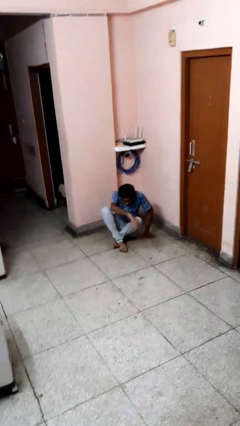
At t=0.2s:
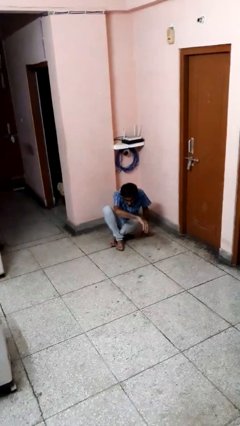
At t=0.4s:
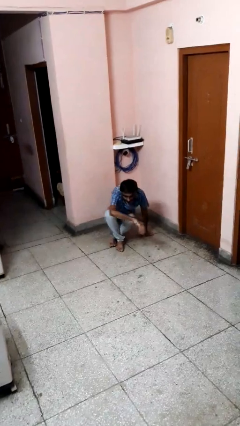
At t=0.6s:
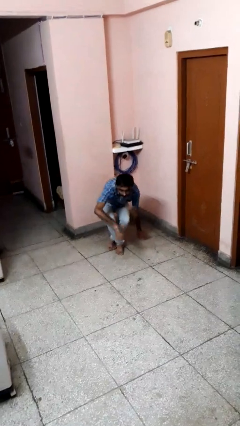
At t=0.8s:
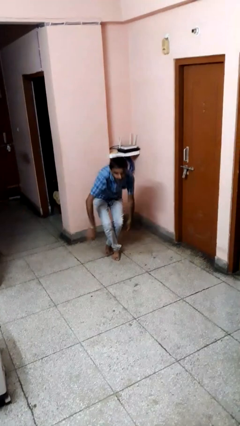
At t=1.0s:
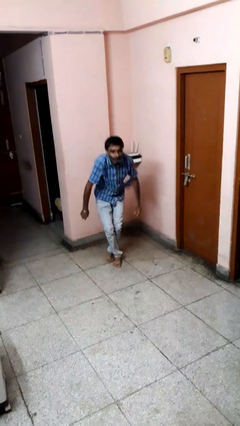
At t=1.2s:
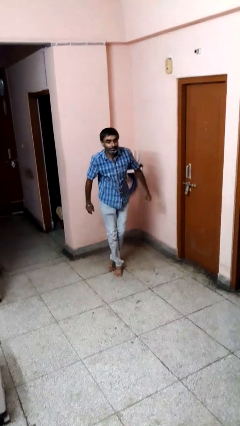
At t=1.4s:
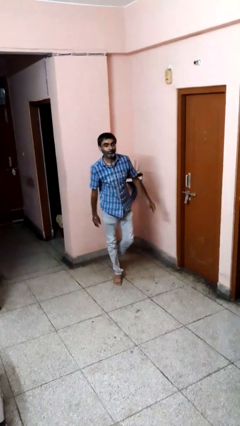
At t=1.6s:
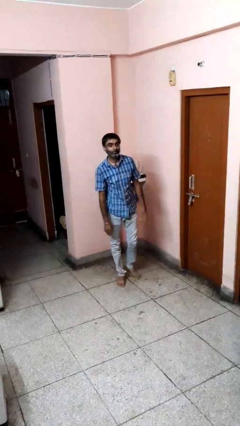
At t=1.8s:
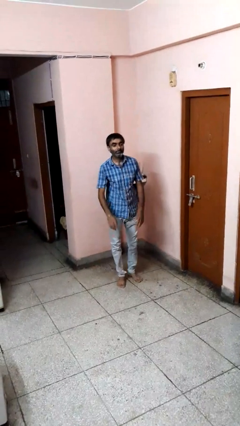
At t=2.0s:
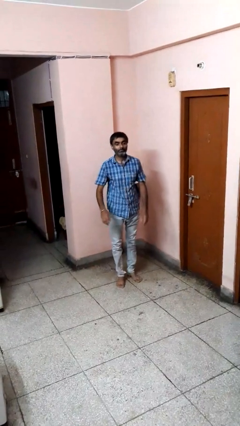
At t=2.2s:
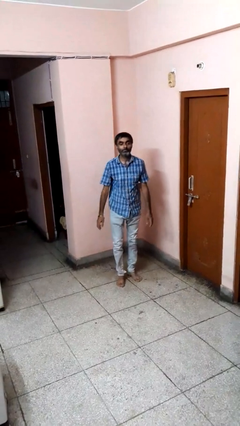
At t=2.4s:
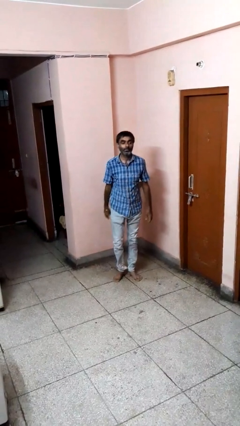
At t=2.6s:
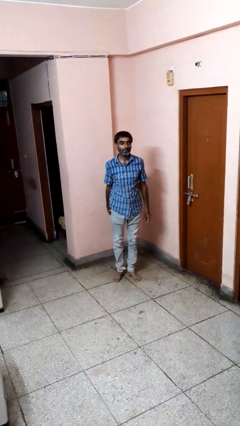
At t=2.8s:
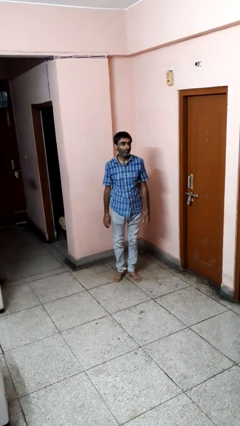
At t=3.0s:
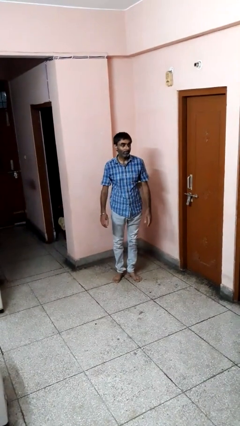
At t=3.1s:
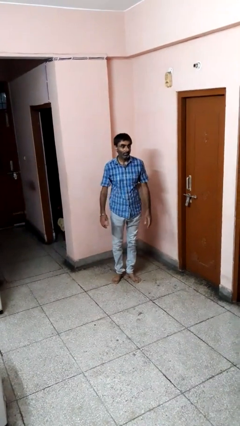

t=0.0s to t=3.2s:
person stands up from floor

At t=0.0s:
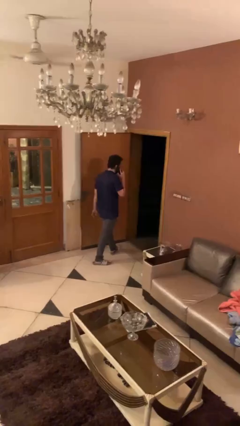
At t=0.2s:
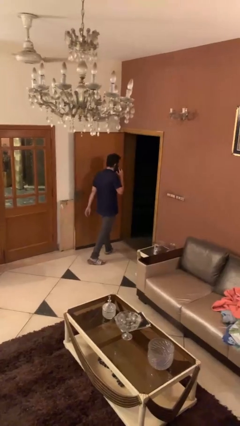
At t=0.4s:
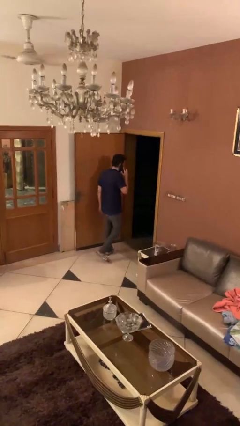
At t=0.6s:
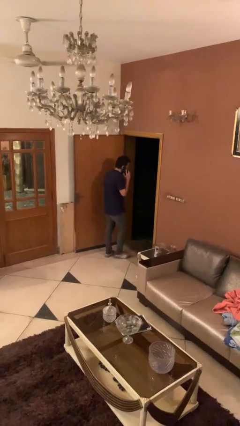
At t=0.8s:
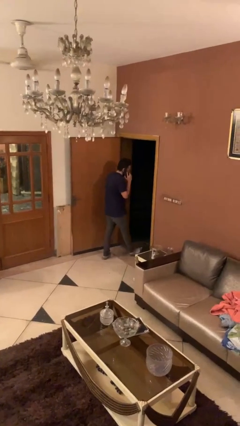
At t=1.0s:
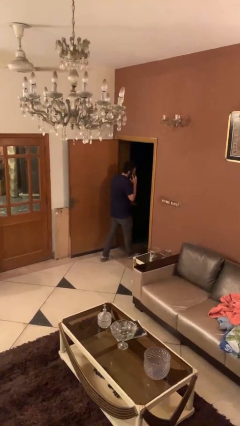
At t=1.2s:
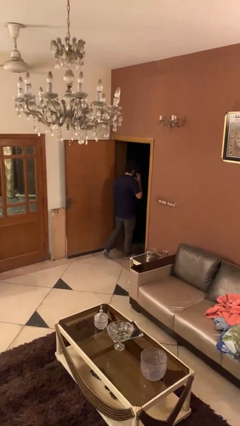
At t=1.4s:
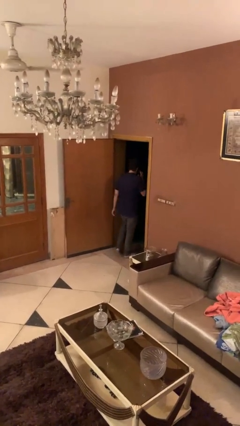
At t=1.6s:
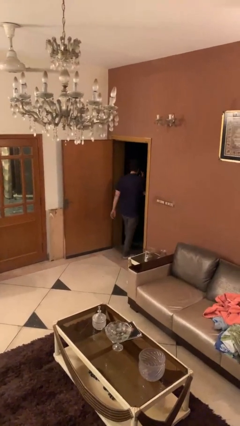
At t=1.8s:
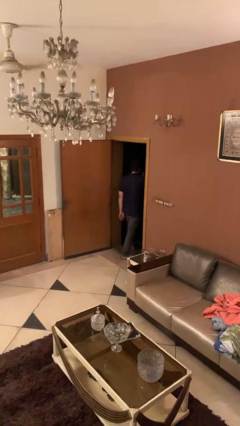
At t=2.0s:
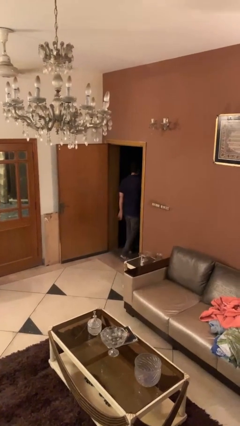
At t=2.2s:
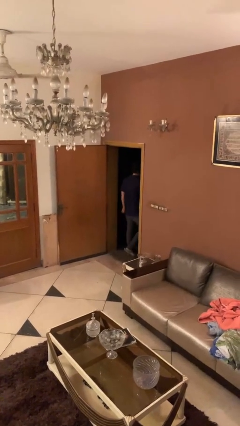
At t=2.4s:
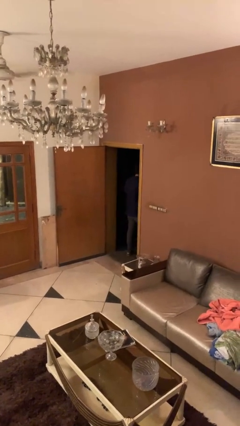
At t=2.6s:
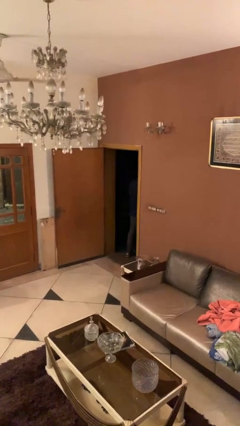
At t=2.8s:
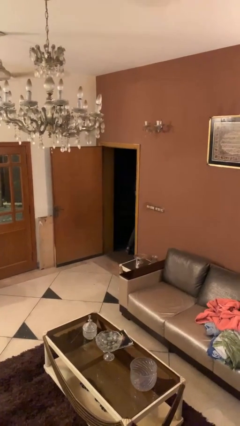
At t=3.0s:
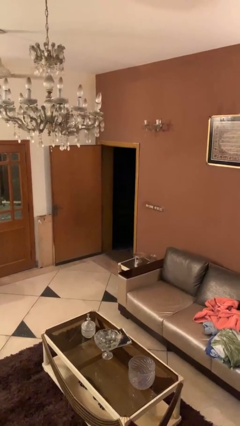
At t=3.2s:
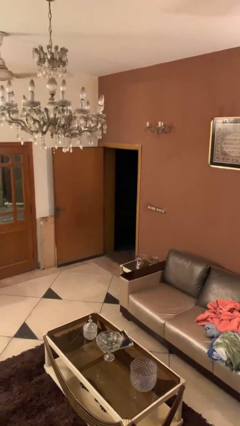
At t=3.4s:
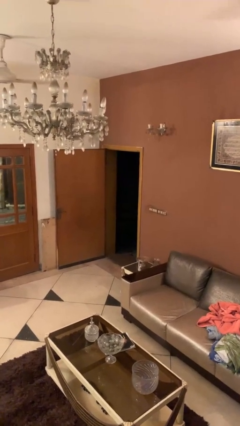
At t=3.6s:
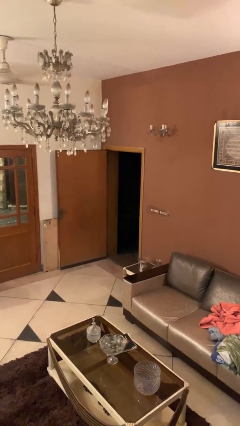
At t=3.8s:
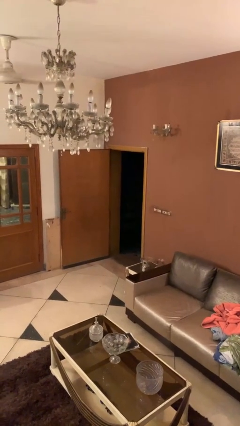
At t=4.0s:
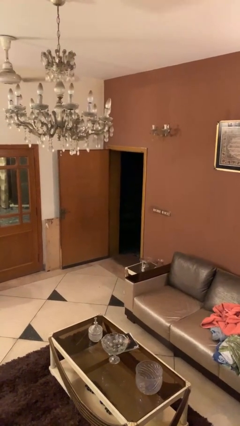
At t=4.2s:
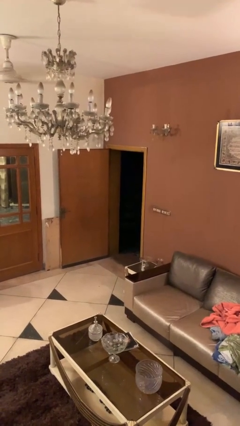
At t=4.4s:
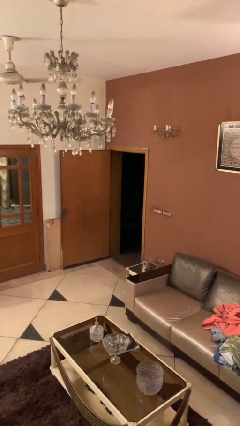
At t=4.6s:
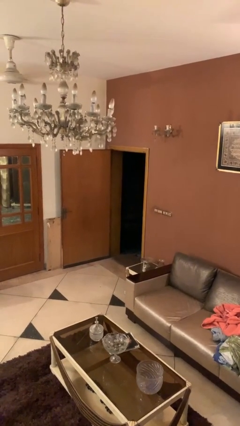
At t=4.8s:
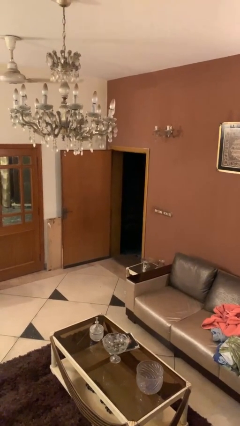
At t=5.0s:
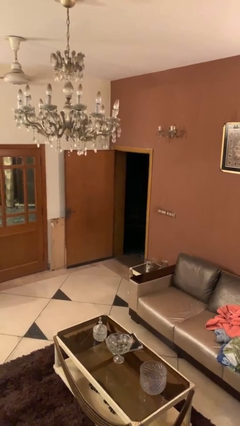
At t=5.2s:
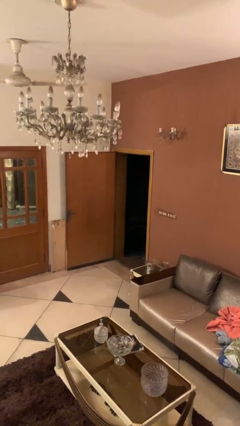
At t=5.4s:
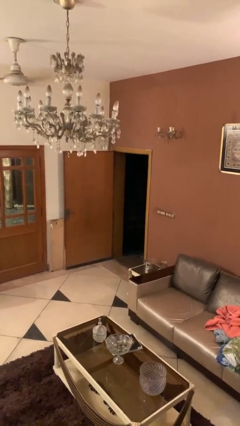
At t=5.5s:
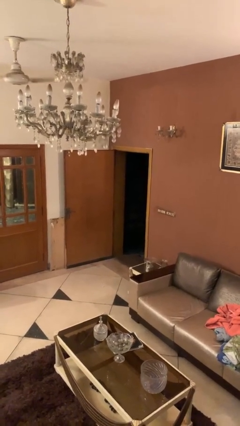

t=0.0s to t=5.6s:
person exits scene through structure

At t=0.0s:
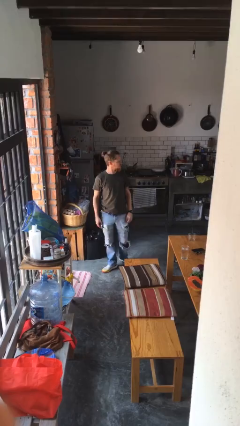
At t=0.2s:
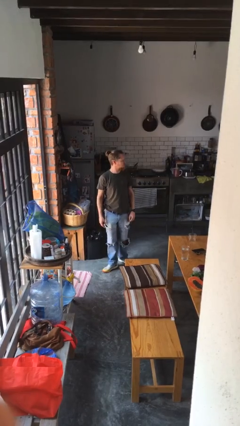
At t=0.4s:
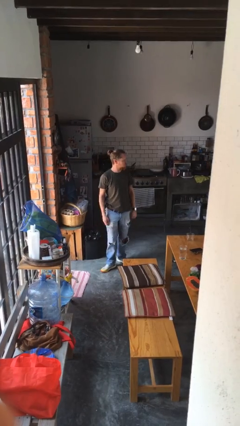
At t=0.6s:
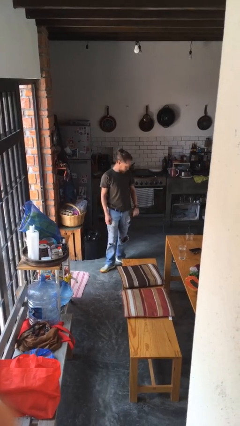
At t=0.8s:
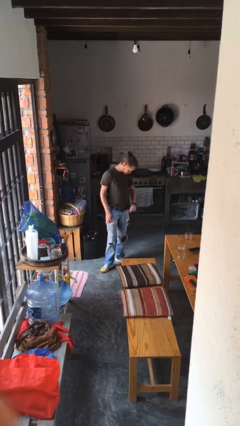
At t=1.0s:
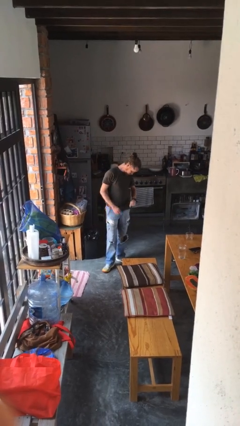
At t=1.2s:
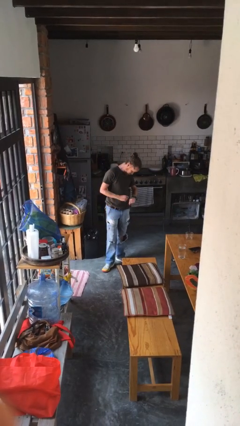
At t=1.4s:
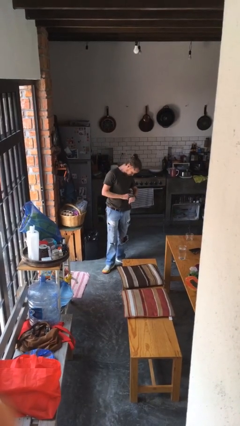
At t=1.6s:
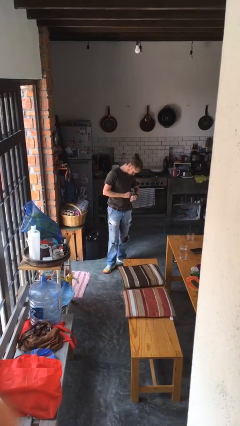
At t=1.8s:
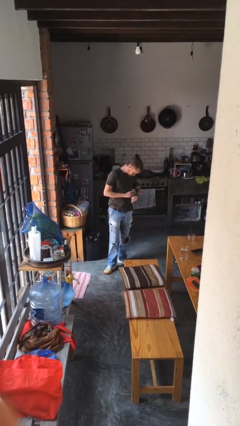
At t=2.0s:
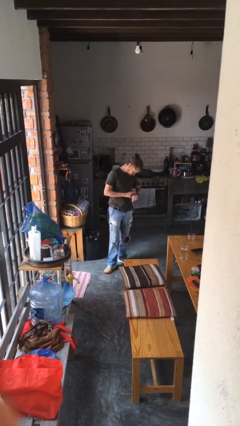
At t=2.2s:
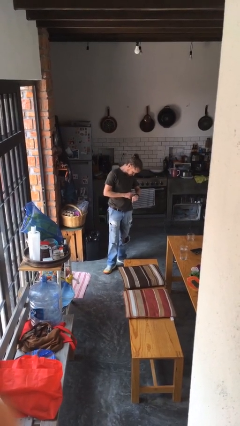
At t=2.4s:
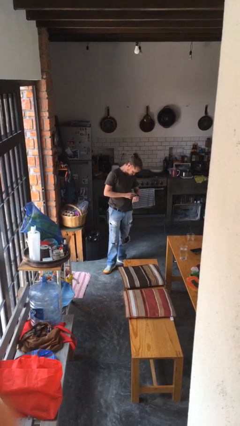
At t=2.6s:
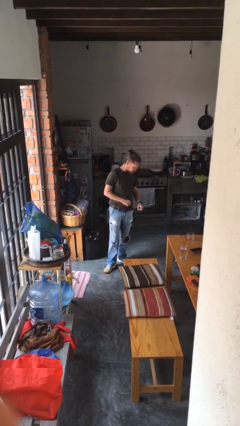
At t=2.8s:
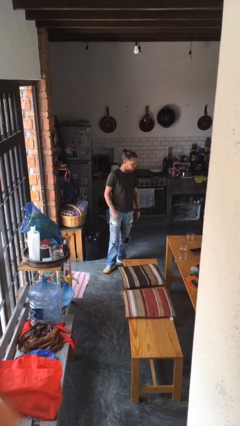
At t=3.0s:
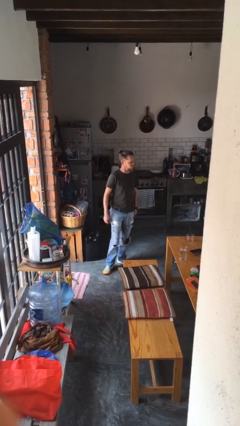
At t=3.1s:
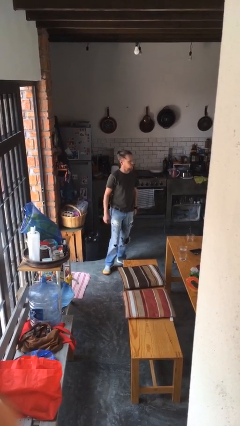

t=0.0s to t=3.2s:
person looks at wristwatch

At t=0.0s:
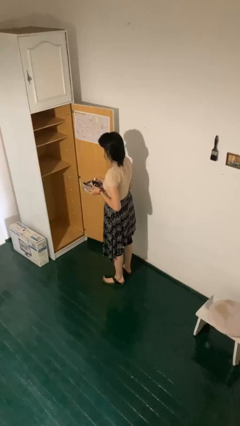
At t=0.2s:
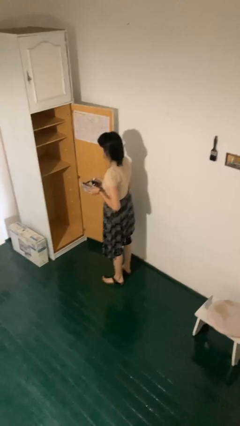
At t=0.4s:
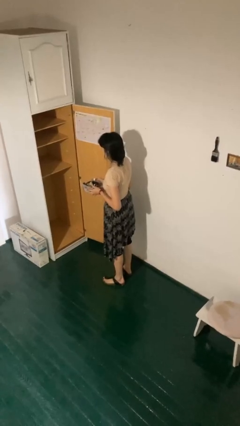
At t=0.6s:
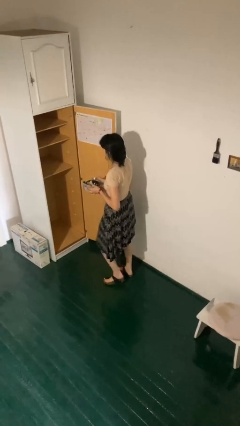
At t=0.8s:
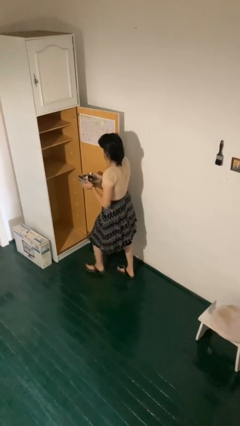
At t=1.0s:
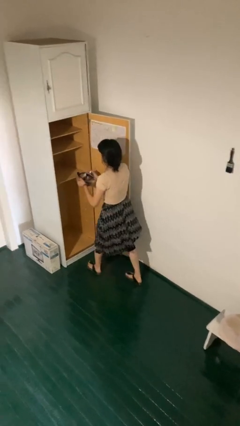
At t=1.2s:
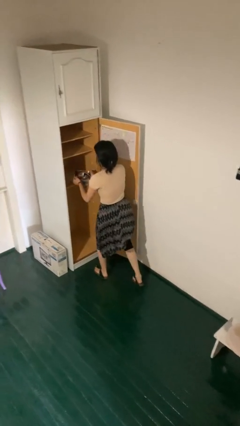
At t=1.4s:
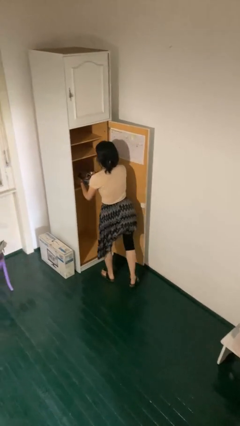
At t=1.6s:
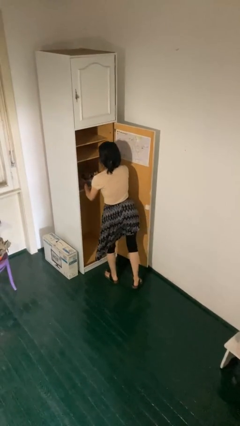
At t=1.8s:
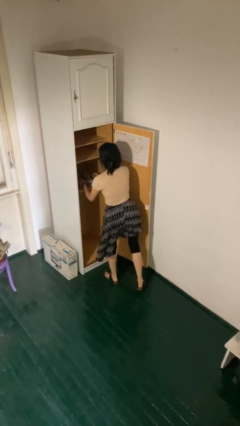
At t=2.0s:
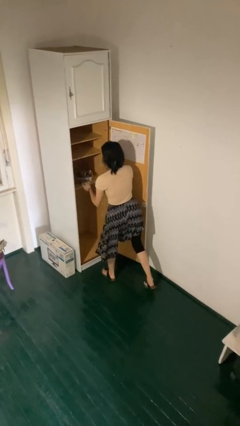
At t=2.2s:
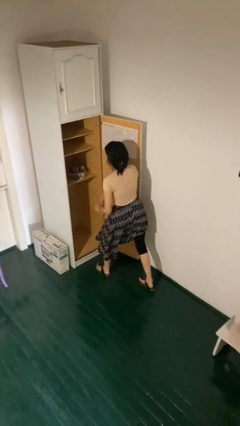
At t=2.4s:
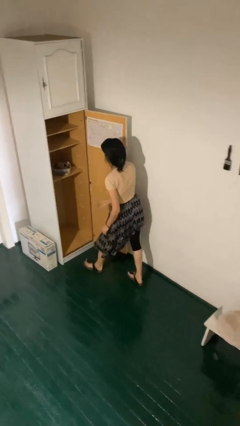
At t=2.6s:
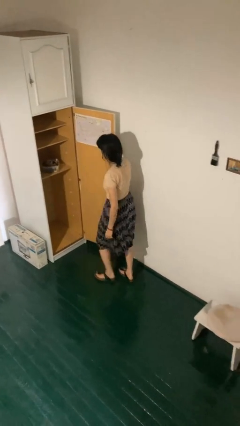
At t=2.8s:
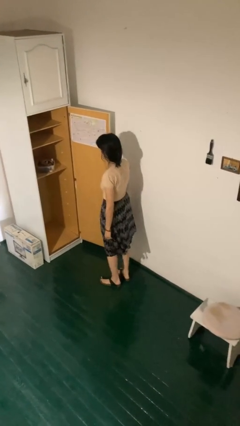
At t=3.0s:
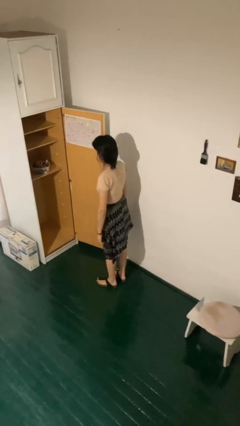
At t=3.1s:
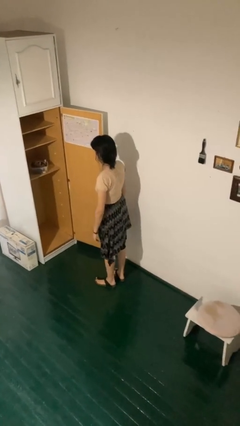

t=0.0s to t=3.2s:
person puts down object into cabinet

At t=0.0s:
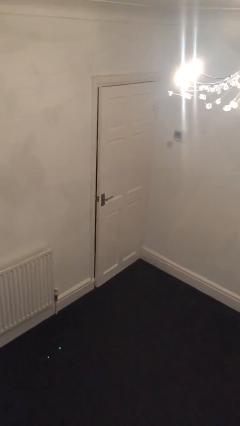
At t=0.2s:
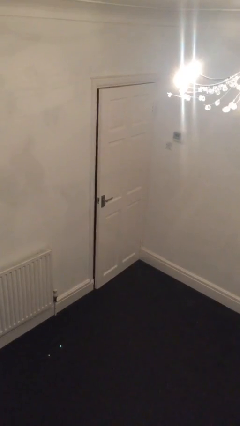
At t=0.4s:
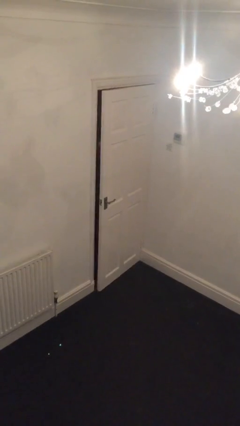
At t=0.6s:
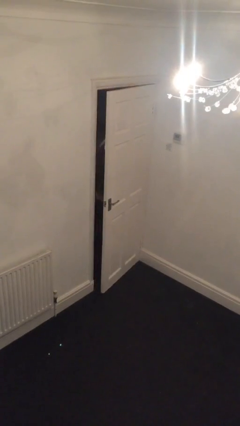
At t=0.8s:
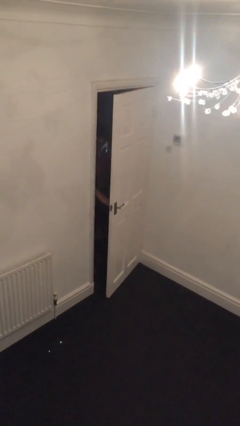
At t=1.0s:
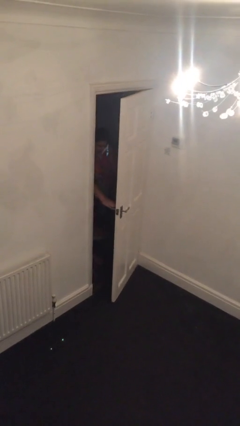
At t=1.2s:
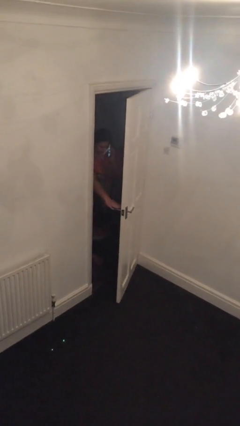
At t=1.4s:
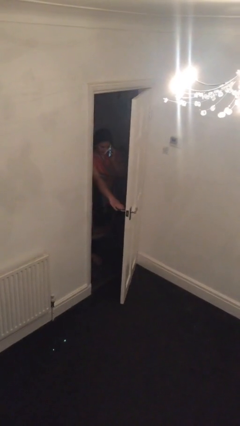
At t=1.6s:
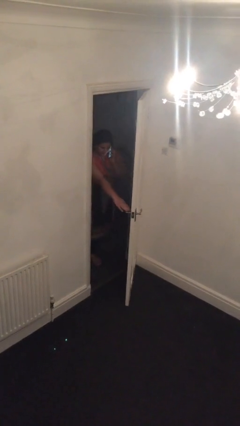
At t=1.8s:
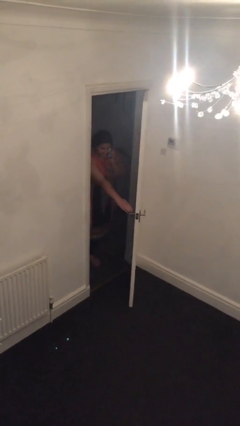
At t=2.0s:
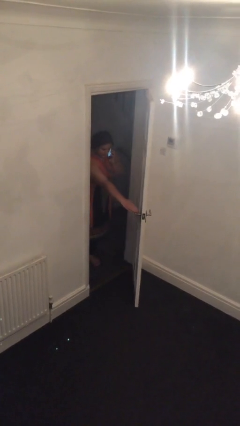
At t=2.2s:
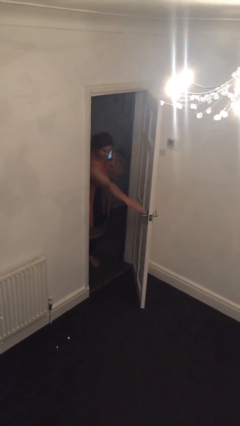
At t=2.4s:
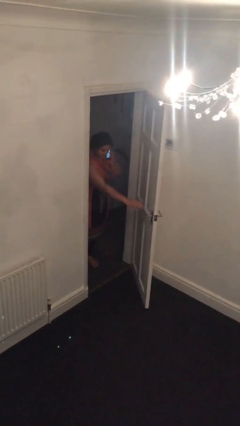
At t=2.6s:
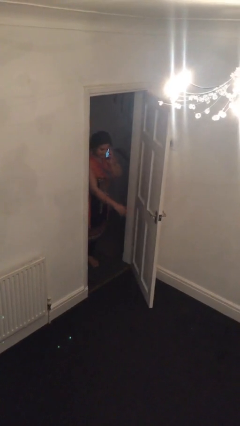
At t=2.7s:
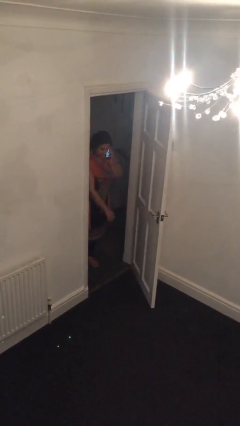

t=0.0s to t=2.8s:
person opens facility door
